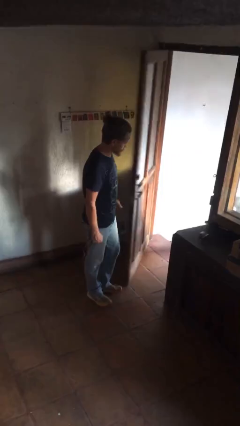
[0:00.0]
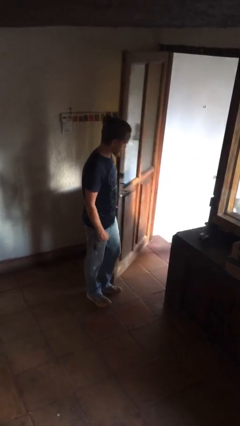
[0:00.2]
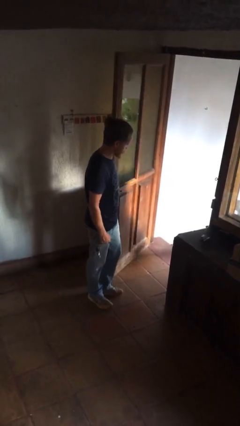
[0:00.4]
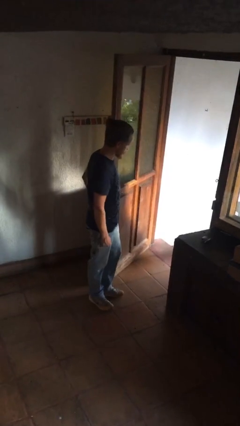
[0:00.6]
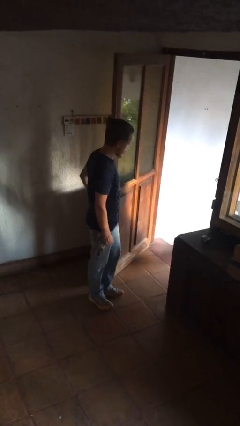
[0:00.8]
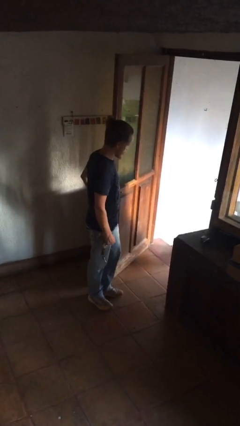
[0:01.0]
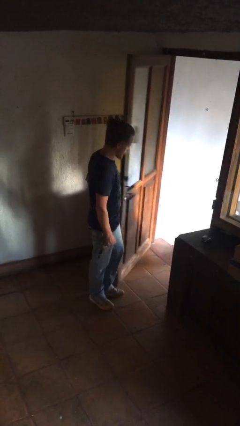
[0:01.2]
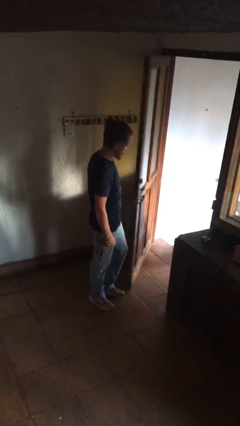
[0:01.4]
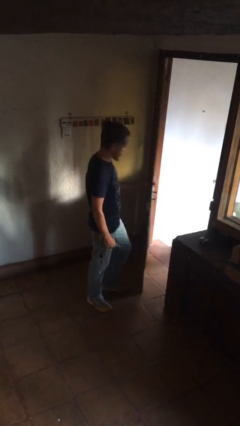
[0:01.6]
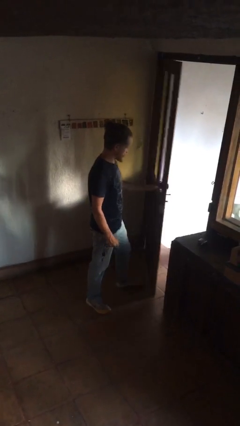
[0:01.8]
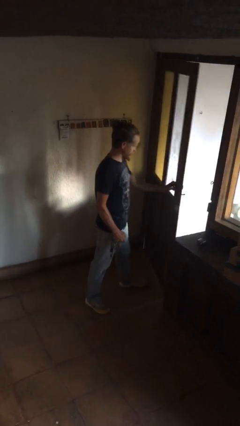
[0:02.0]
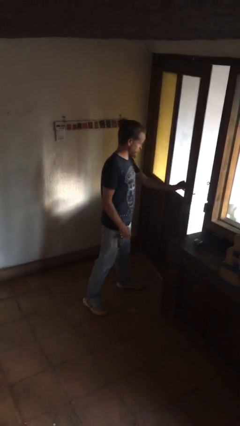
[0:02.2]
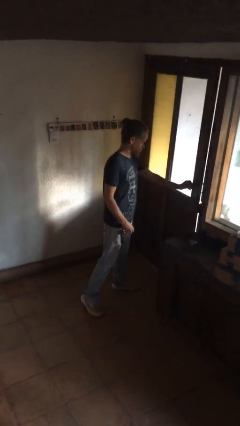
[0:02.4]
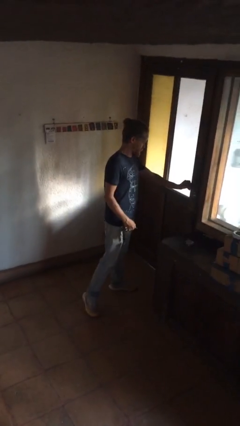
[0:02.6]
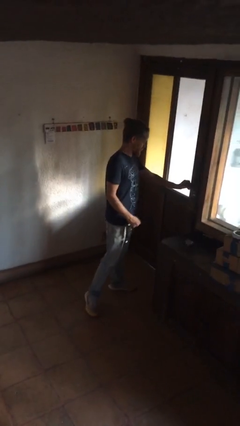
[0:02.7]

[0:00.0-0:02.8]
person closes facility door

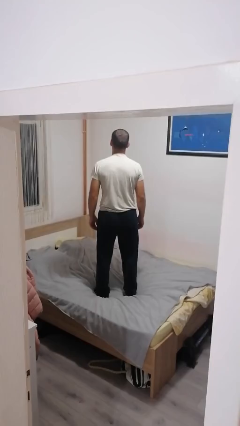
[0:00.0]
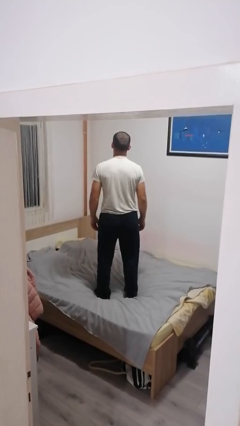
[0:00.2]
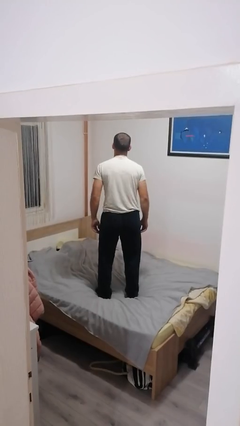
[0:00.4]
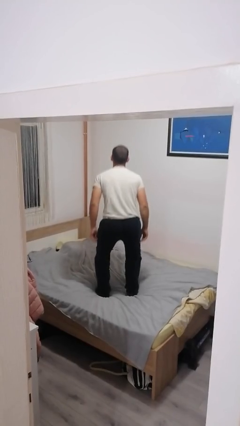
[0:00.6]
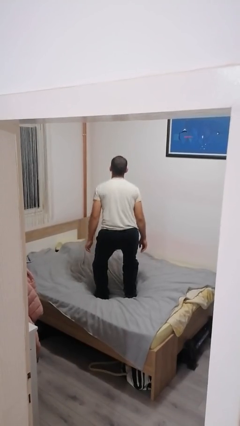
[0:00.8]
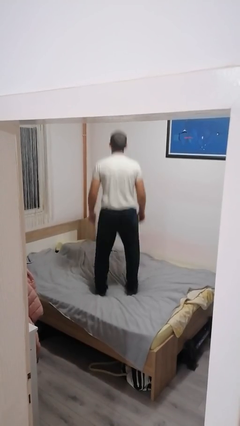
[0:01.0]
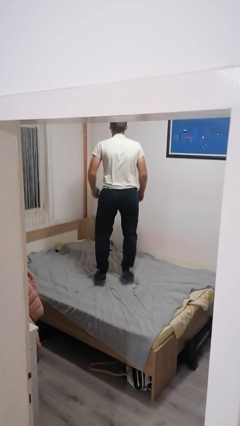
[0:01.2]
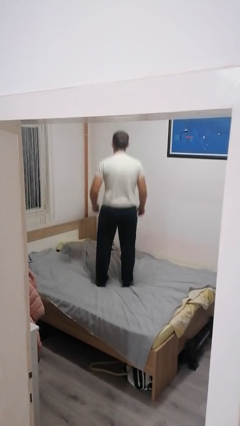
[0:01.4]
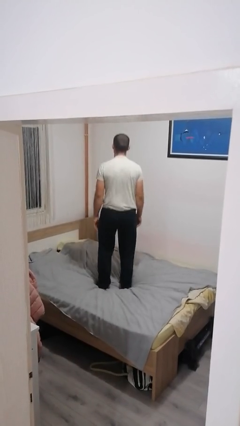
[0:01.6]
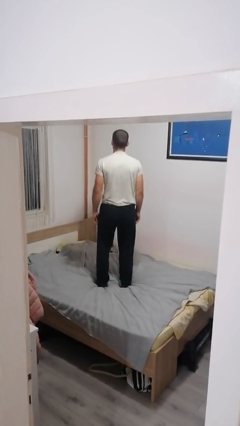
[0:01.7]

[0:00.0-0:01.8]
person jumps on bed

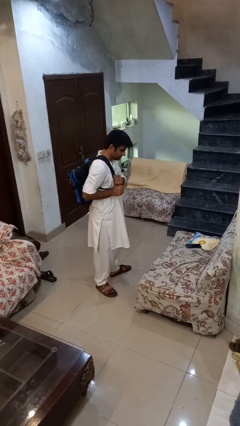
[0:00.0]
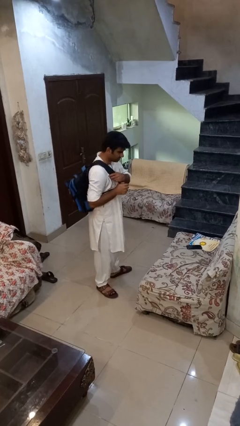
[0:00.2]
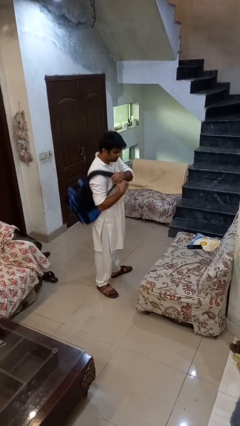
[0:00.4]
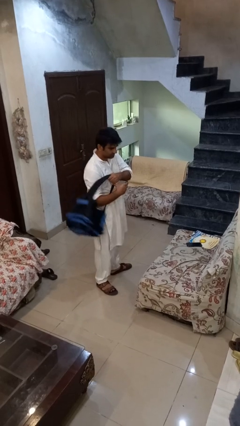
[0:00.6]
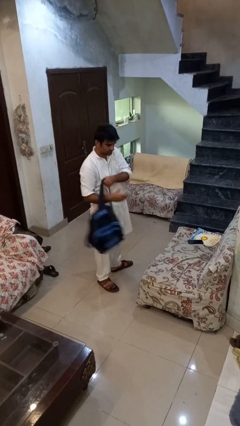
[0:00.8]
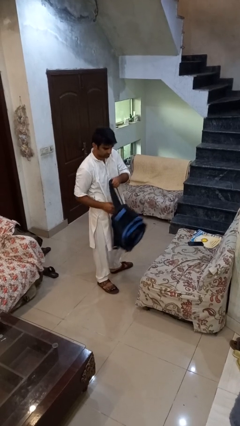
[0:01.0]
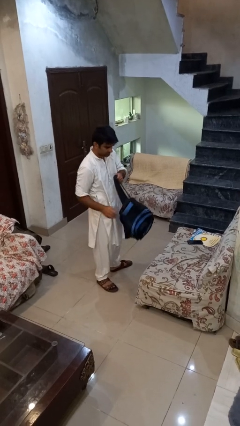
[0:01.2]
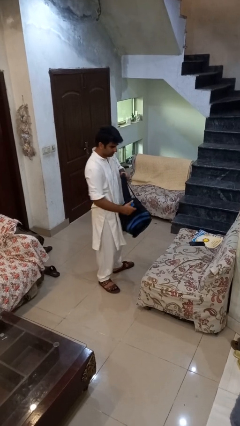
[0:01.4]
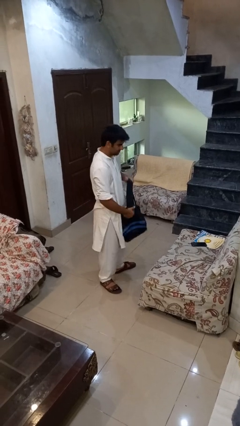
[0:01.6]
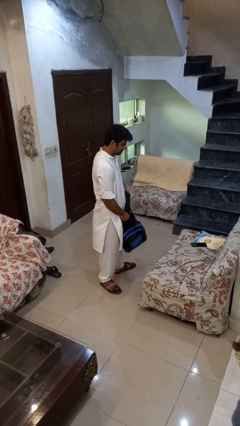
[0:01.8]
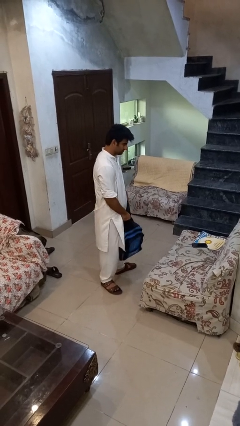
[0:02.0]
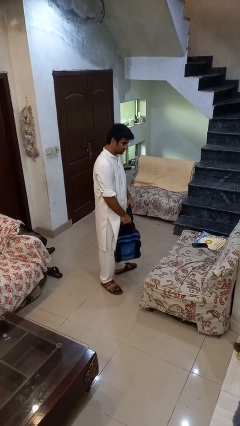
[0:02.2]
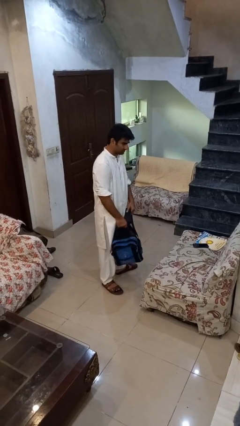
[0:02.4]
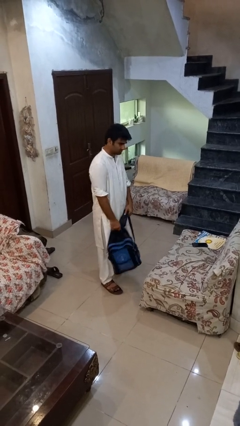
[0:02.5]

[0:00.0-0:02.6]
person takes off backpack

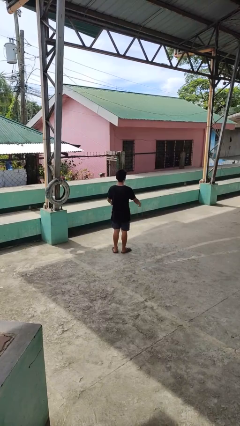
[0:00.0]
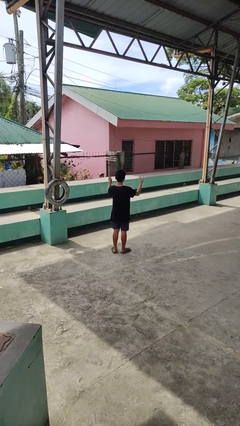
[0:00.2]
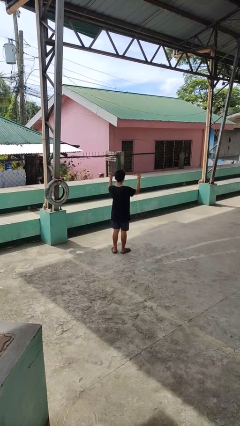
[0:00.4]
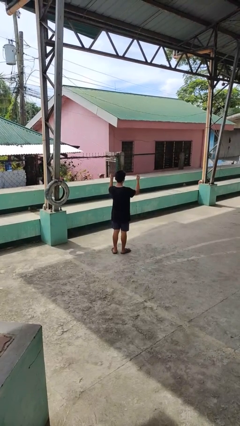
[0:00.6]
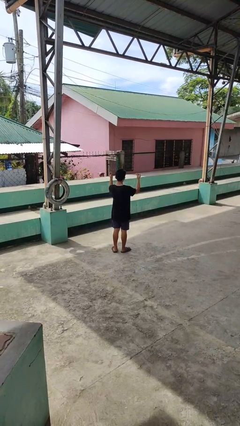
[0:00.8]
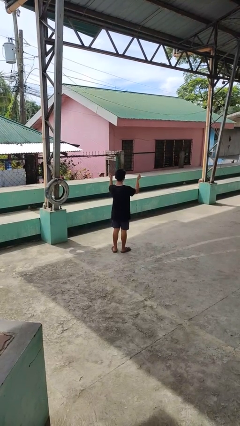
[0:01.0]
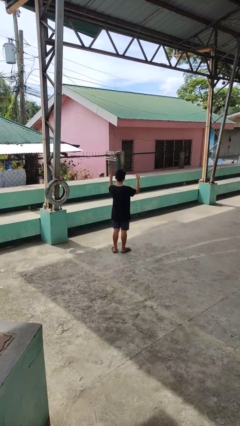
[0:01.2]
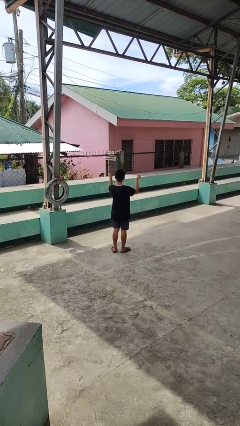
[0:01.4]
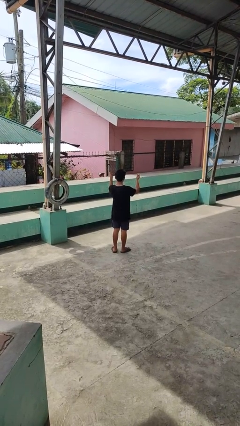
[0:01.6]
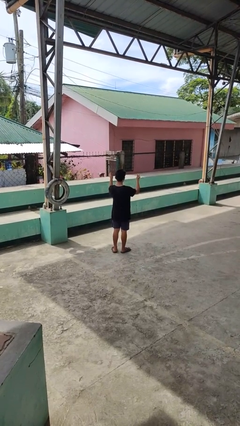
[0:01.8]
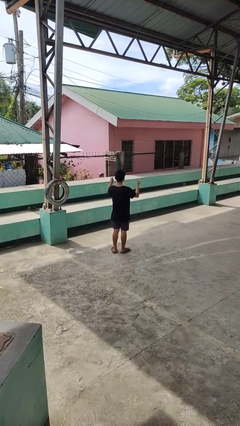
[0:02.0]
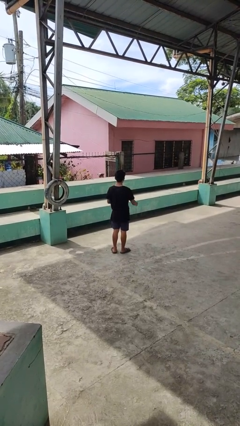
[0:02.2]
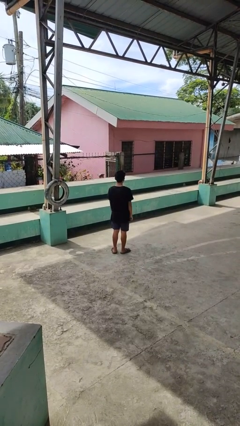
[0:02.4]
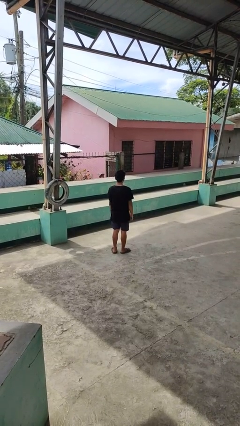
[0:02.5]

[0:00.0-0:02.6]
person snaps fingers

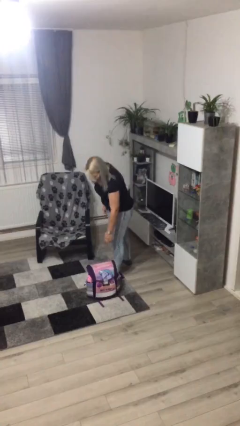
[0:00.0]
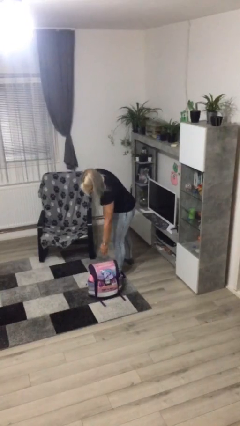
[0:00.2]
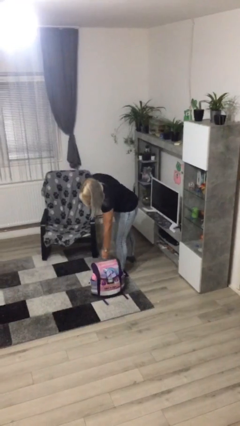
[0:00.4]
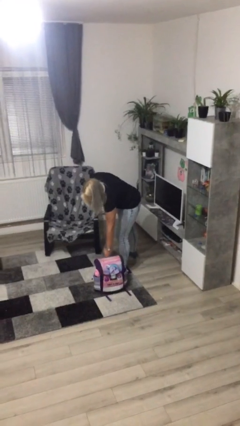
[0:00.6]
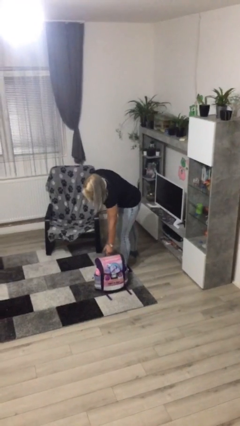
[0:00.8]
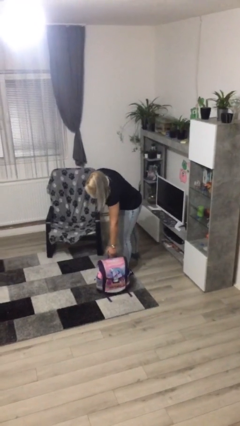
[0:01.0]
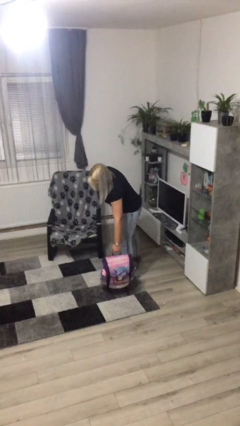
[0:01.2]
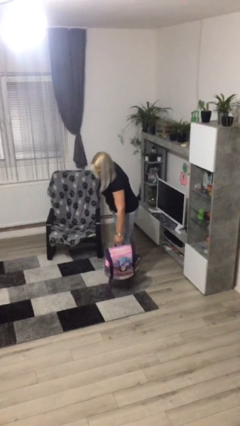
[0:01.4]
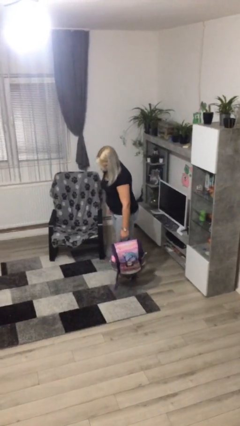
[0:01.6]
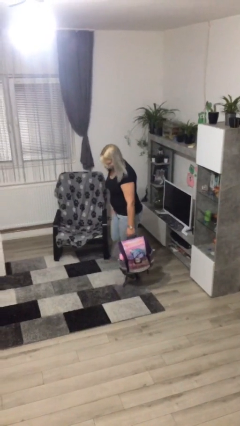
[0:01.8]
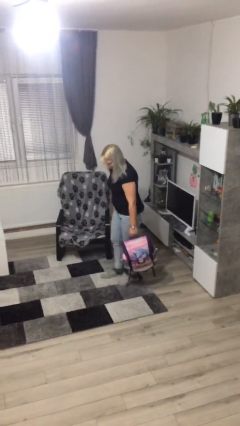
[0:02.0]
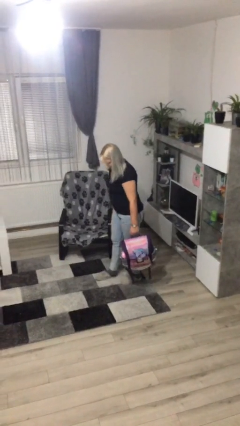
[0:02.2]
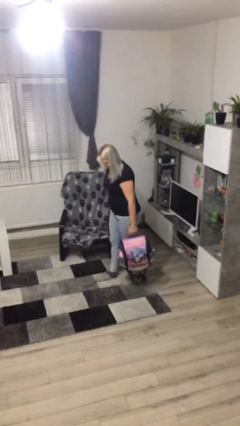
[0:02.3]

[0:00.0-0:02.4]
person picks up object from floor

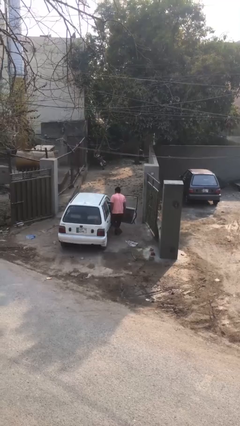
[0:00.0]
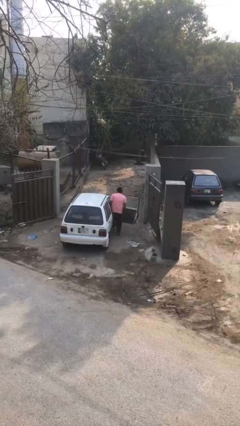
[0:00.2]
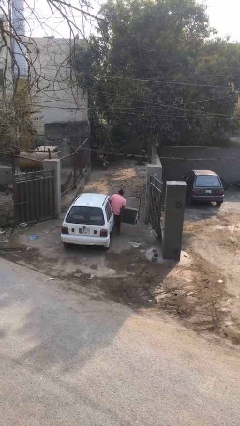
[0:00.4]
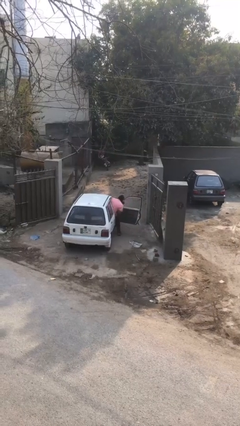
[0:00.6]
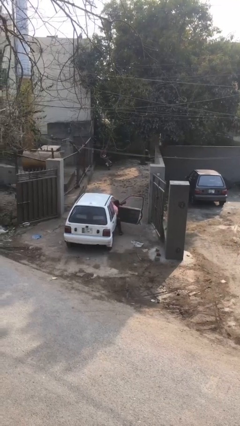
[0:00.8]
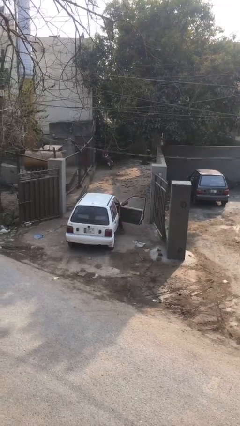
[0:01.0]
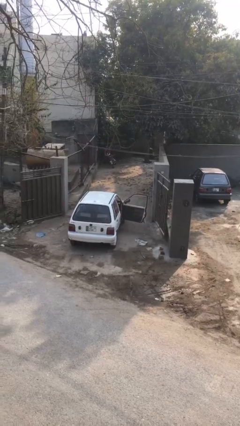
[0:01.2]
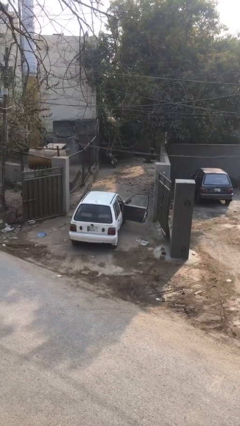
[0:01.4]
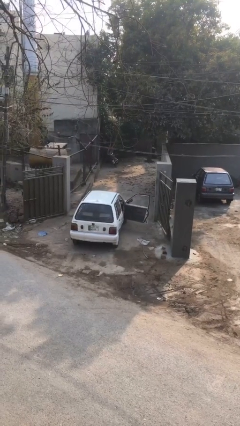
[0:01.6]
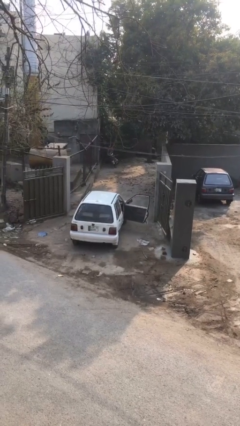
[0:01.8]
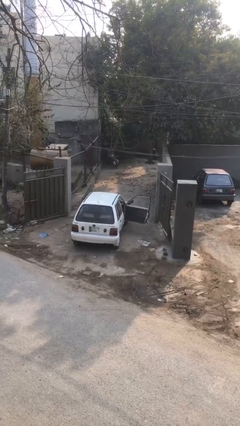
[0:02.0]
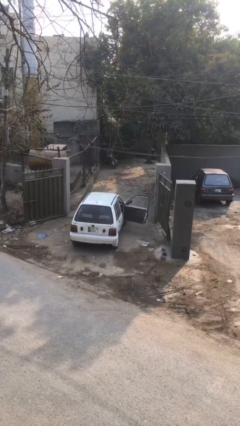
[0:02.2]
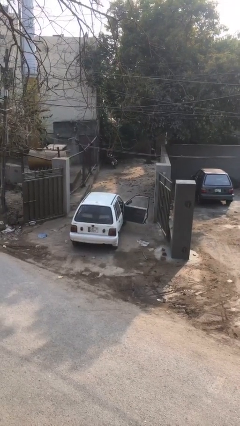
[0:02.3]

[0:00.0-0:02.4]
person enters car

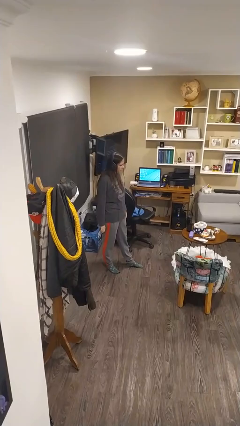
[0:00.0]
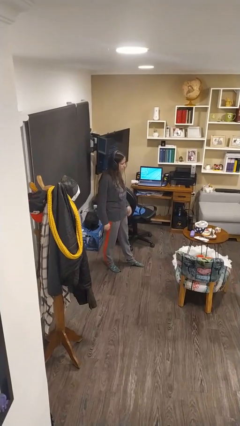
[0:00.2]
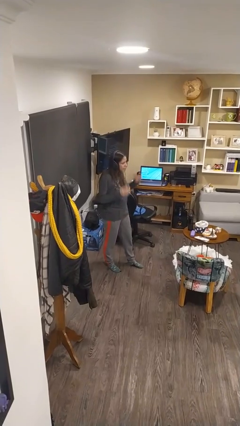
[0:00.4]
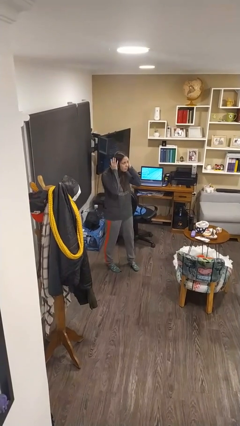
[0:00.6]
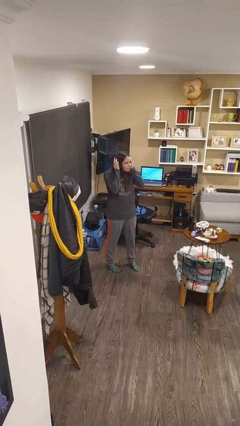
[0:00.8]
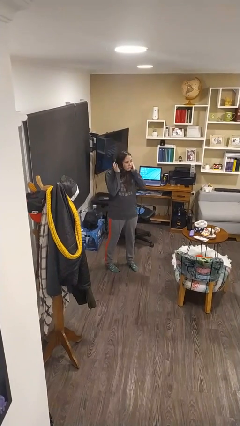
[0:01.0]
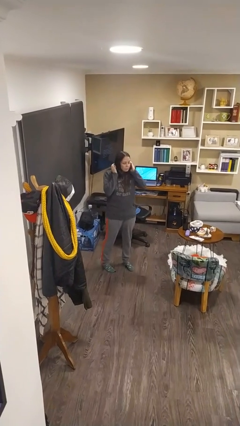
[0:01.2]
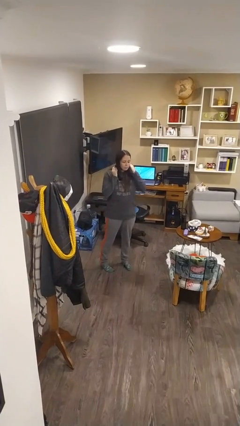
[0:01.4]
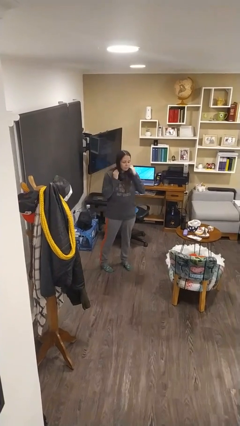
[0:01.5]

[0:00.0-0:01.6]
person takes off headphones

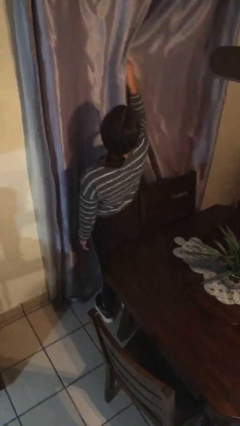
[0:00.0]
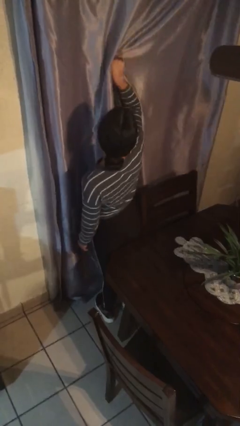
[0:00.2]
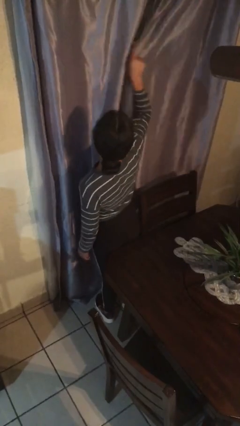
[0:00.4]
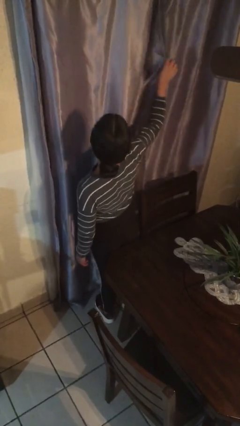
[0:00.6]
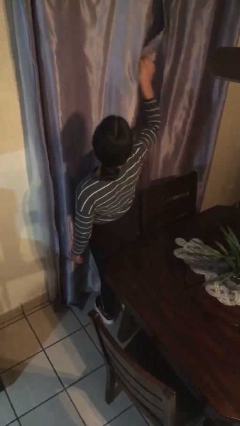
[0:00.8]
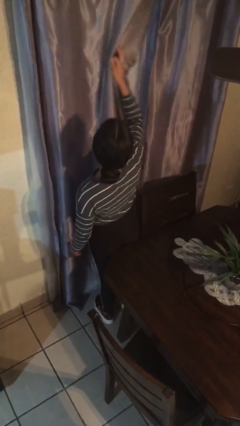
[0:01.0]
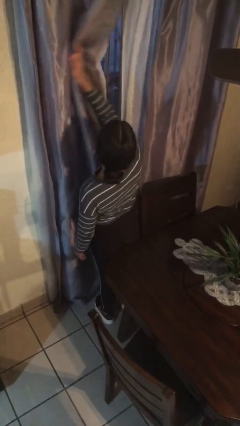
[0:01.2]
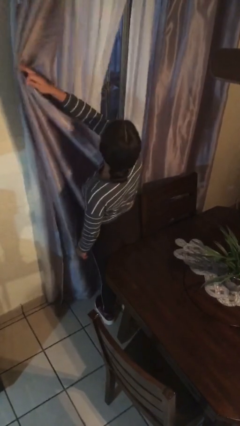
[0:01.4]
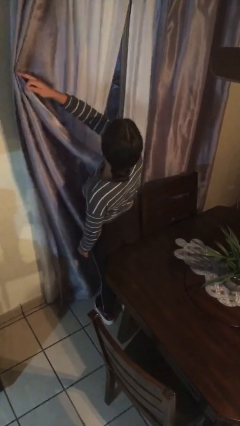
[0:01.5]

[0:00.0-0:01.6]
person opens curtains
